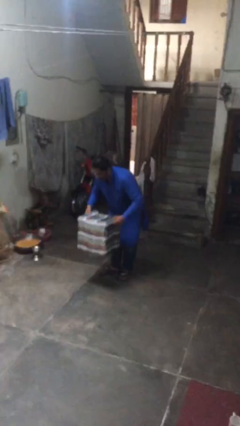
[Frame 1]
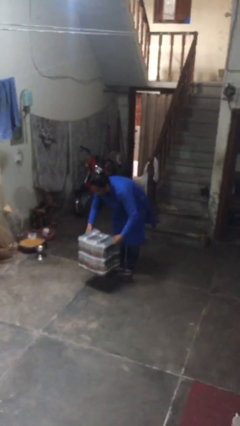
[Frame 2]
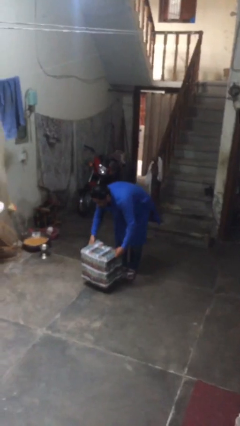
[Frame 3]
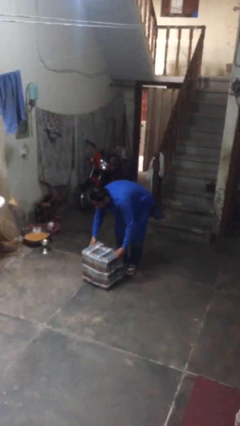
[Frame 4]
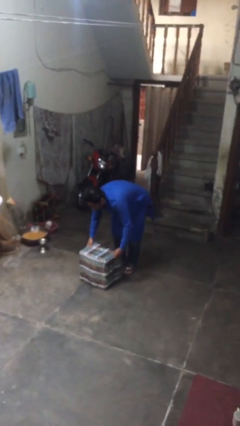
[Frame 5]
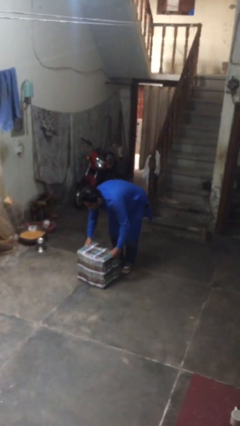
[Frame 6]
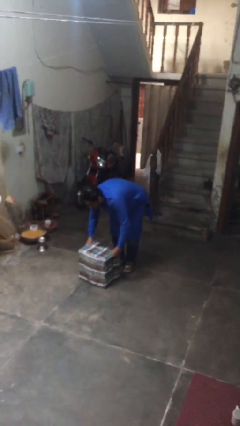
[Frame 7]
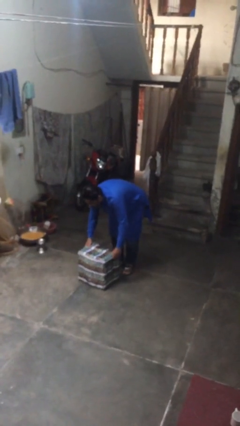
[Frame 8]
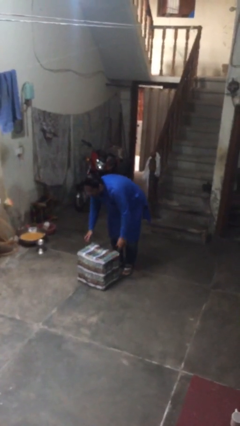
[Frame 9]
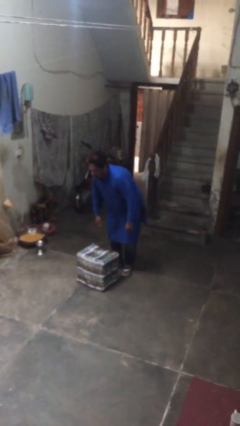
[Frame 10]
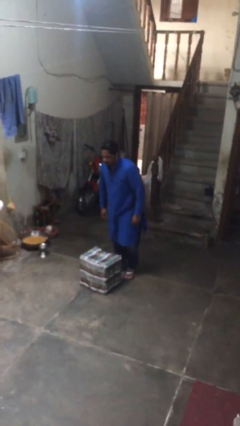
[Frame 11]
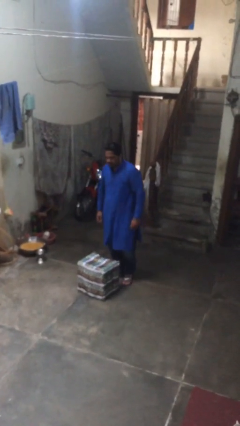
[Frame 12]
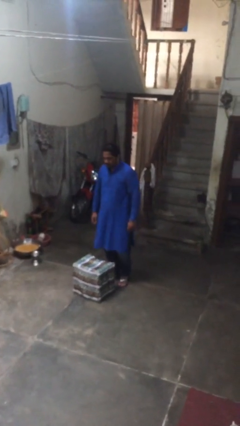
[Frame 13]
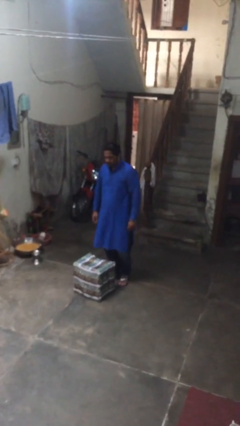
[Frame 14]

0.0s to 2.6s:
person puts down object on floor

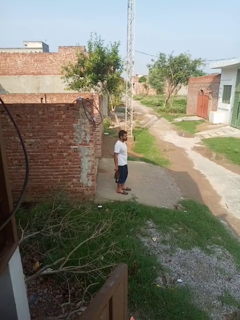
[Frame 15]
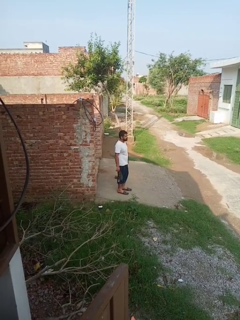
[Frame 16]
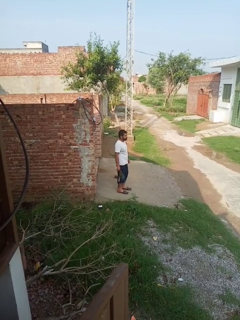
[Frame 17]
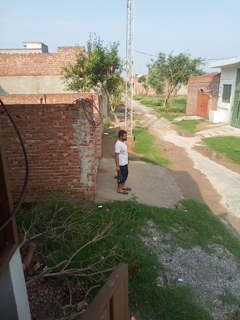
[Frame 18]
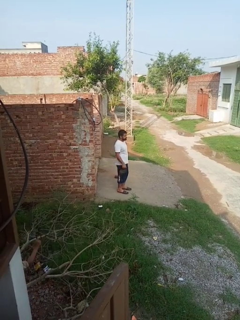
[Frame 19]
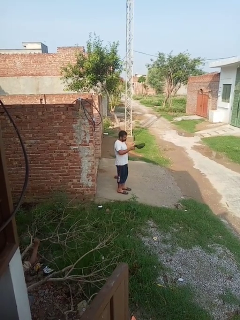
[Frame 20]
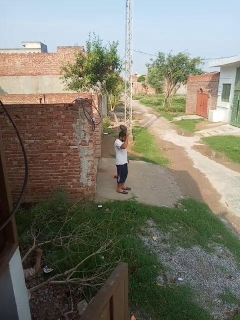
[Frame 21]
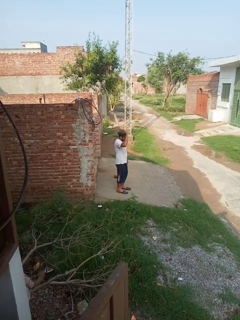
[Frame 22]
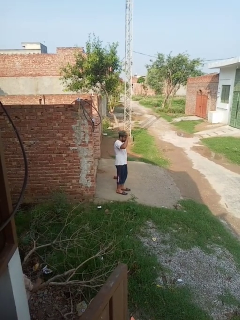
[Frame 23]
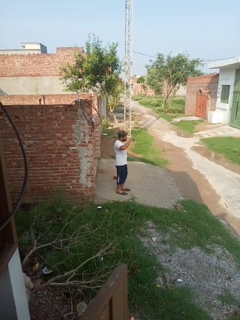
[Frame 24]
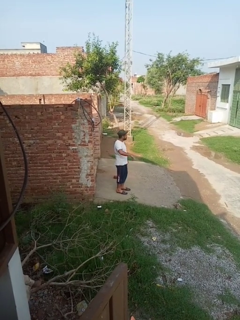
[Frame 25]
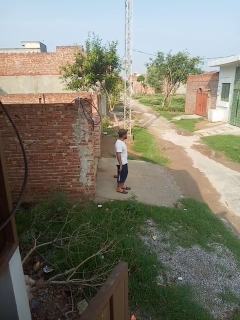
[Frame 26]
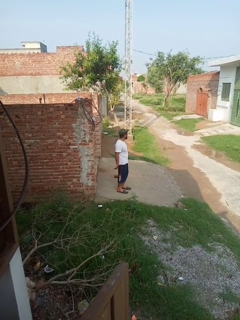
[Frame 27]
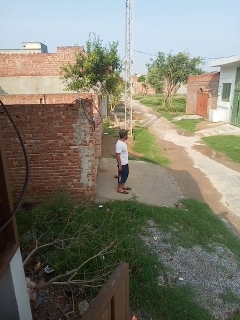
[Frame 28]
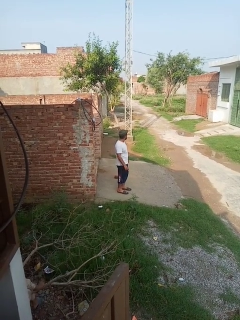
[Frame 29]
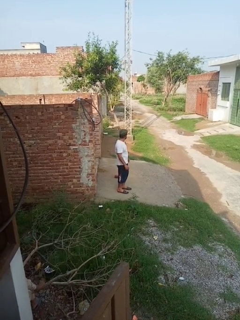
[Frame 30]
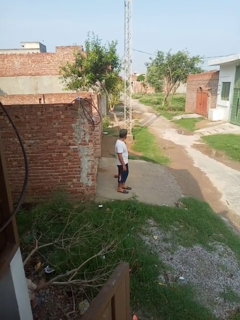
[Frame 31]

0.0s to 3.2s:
person puts on hat

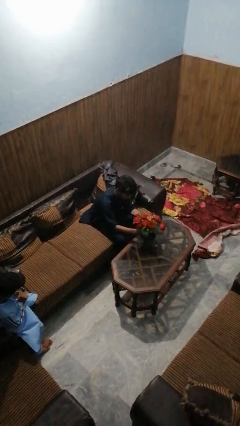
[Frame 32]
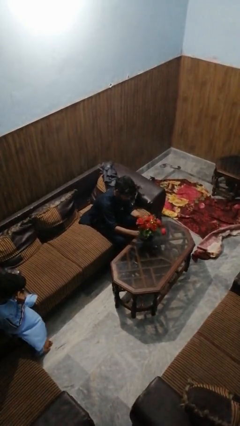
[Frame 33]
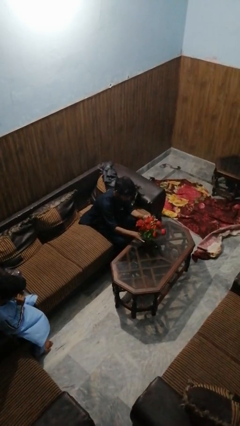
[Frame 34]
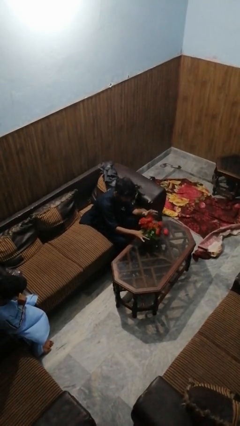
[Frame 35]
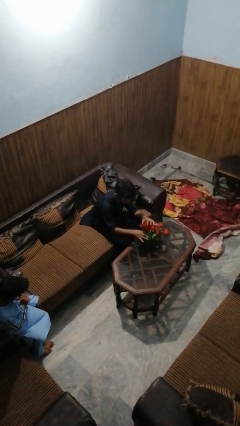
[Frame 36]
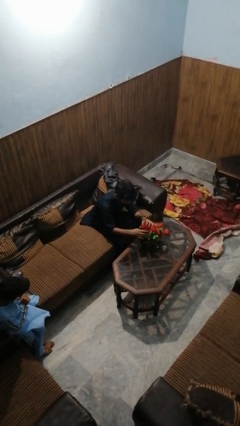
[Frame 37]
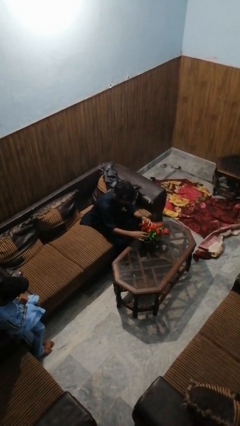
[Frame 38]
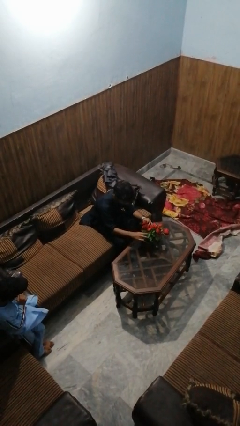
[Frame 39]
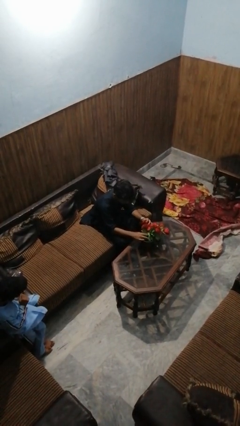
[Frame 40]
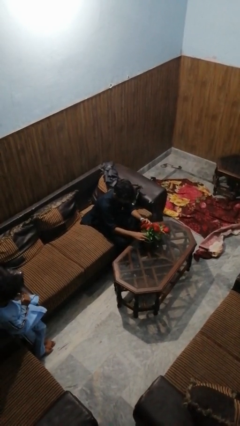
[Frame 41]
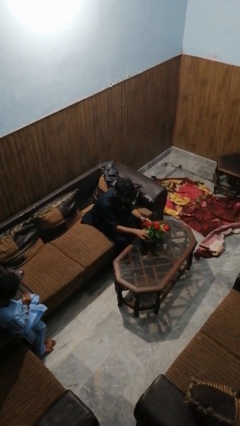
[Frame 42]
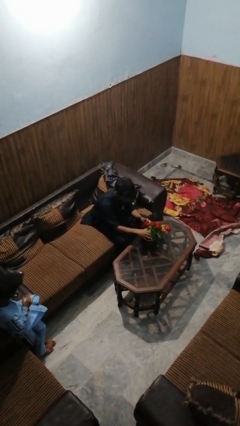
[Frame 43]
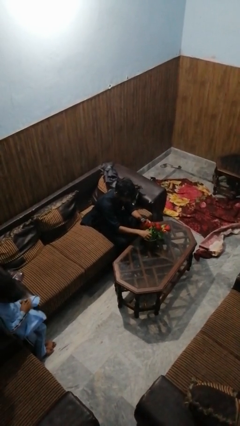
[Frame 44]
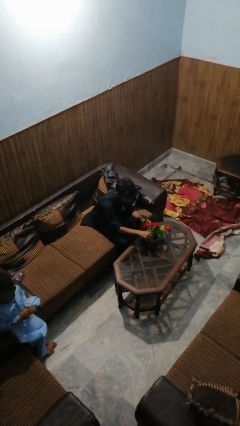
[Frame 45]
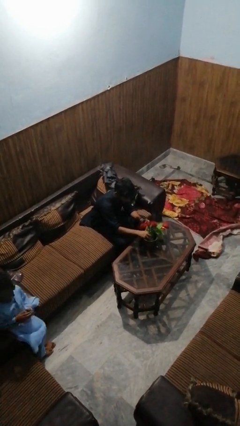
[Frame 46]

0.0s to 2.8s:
person arranges flowers in vase

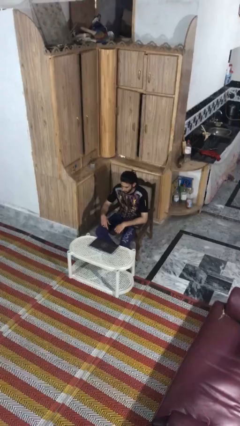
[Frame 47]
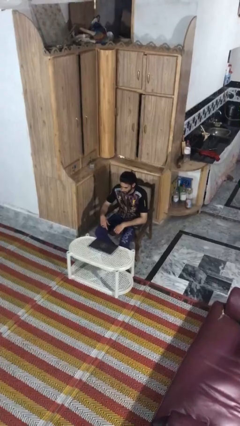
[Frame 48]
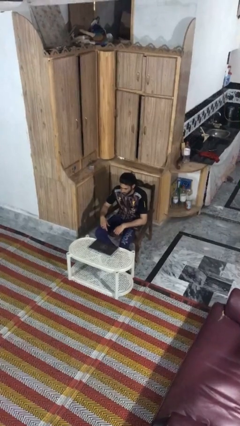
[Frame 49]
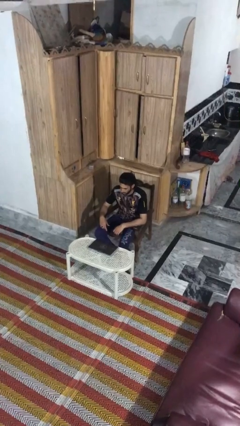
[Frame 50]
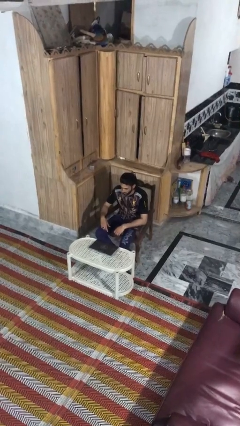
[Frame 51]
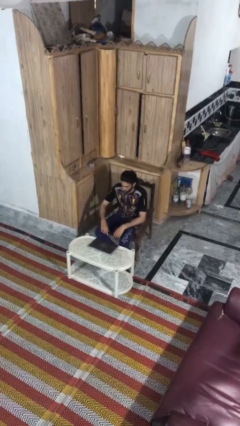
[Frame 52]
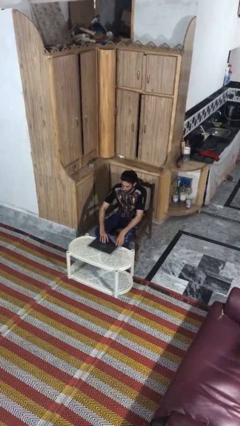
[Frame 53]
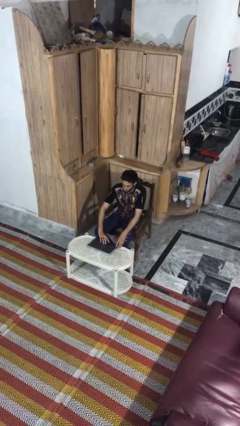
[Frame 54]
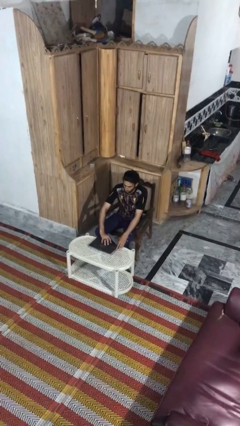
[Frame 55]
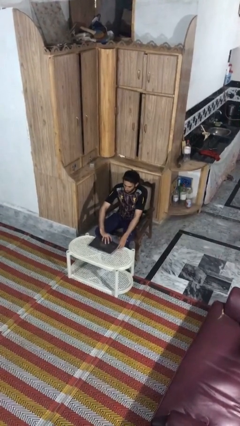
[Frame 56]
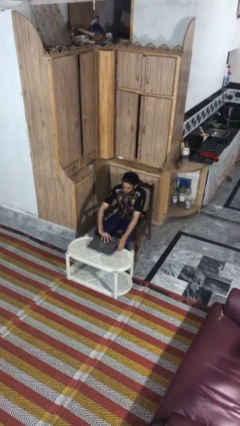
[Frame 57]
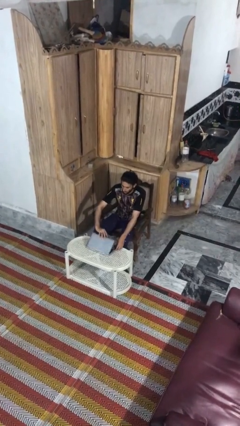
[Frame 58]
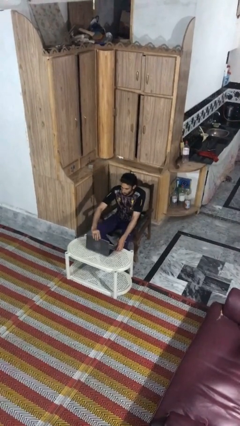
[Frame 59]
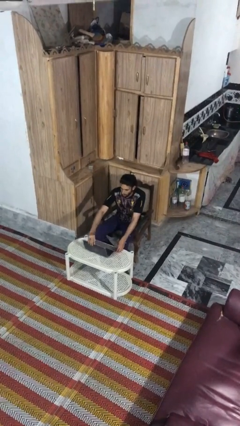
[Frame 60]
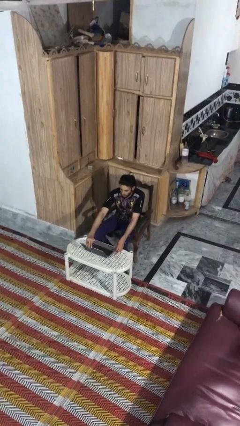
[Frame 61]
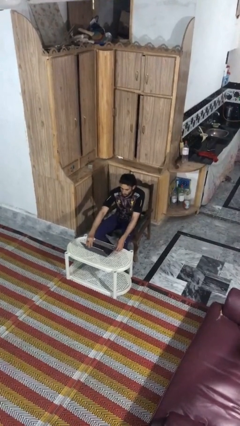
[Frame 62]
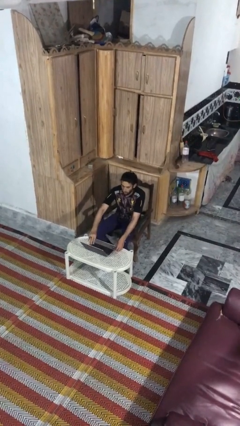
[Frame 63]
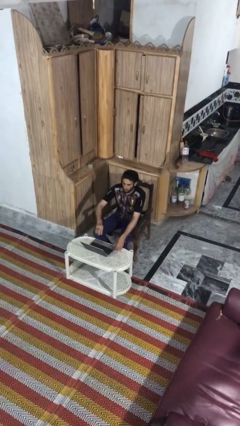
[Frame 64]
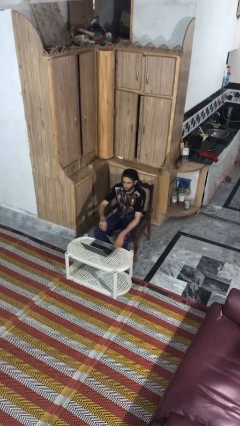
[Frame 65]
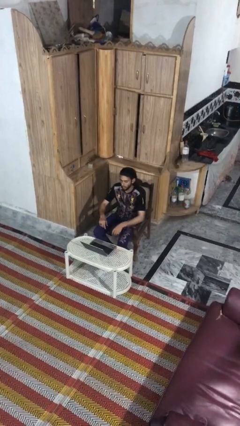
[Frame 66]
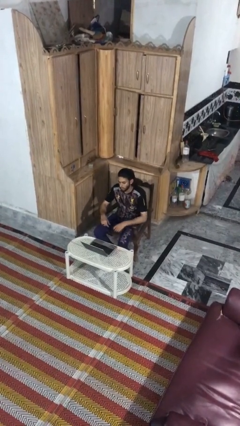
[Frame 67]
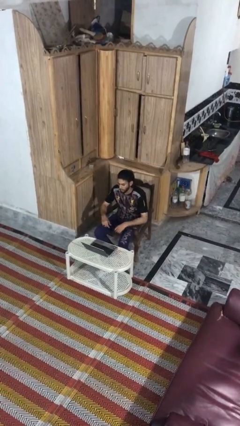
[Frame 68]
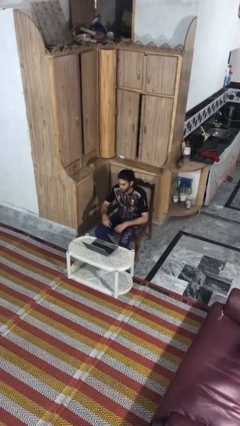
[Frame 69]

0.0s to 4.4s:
person opens laptop

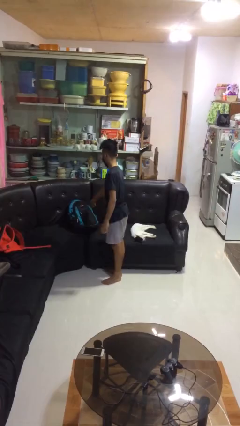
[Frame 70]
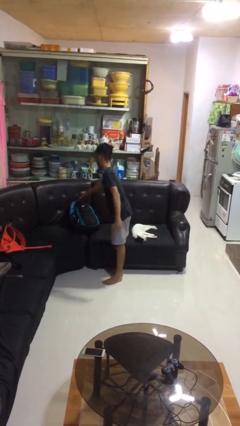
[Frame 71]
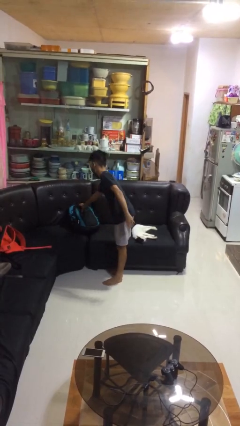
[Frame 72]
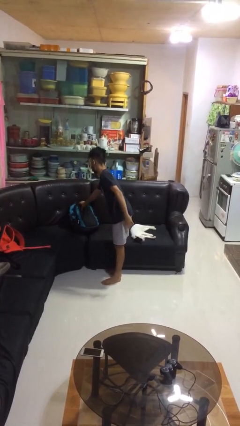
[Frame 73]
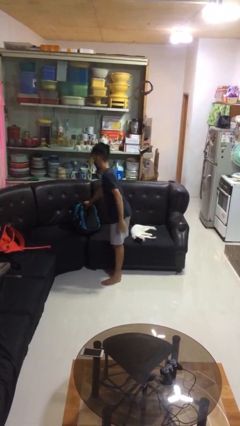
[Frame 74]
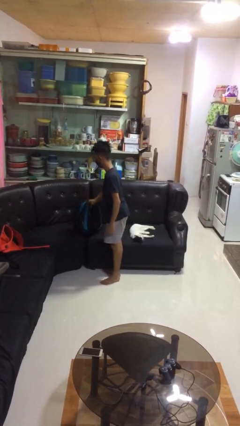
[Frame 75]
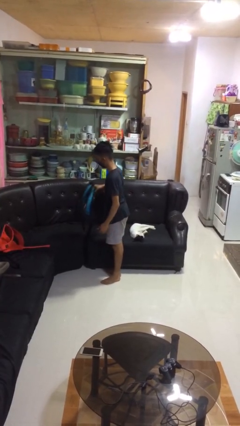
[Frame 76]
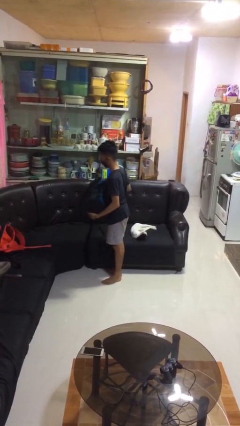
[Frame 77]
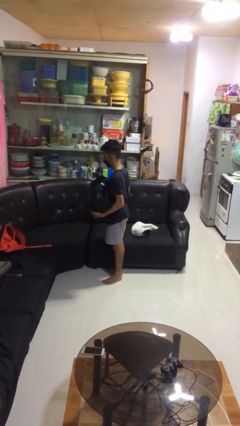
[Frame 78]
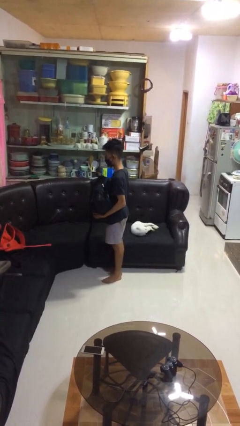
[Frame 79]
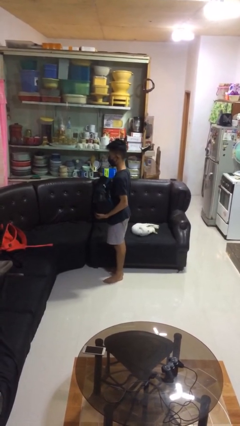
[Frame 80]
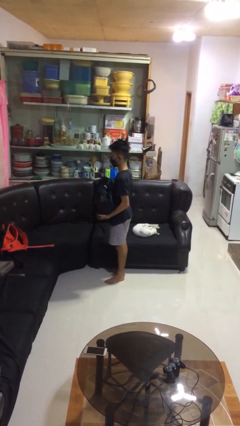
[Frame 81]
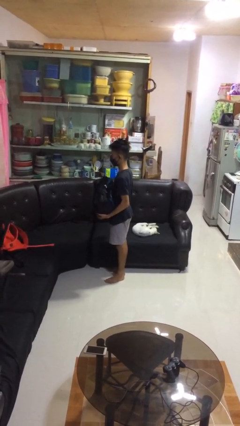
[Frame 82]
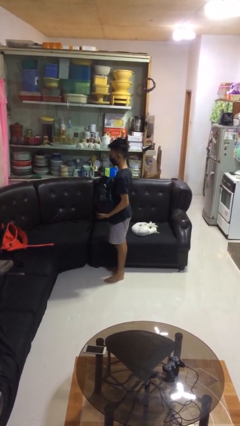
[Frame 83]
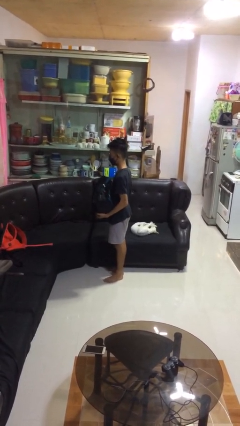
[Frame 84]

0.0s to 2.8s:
person picks up object from couch

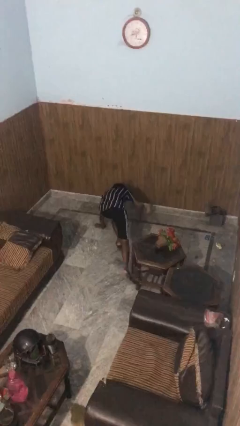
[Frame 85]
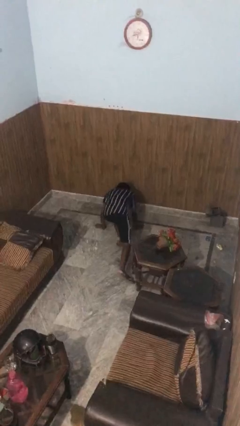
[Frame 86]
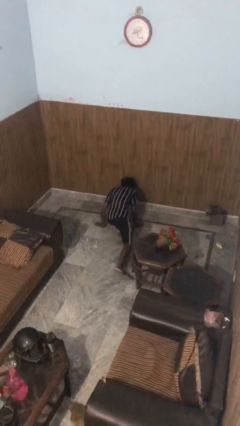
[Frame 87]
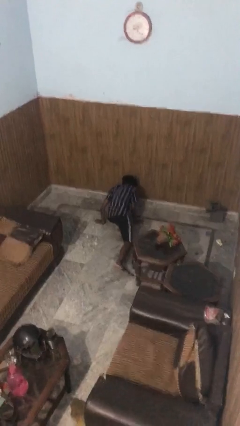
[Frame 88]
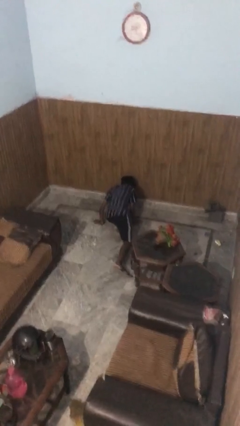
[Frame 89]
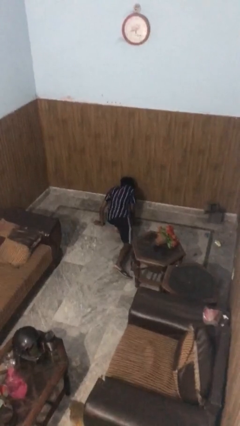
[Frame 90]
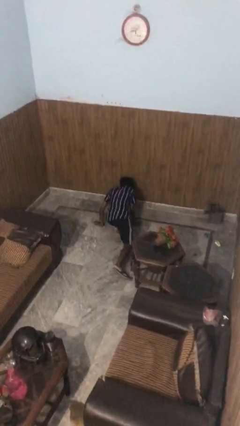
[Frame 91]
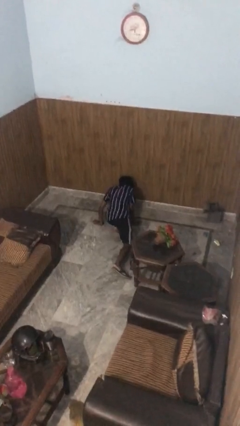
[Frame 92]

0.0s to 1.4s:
person lies down on floor

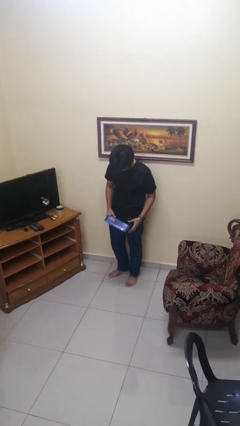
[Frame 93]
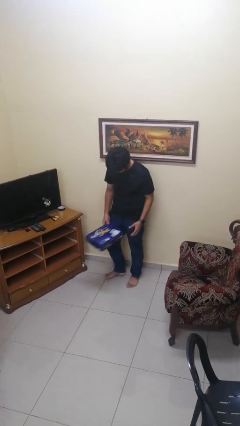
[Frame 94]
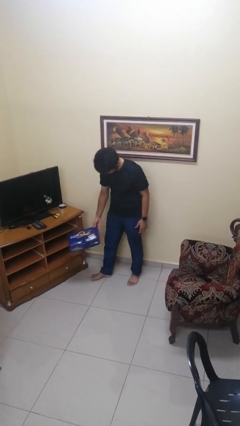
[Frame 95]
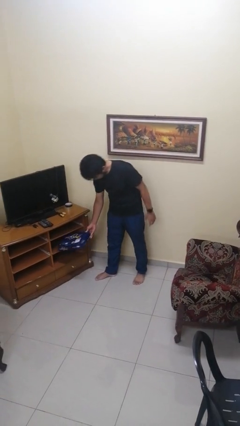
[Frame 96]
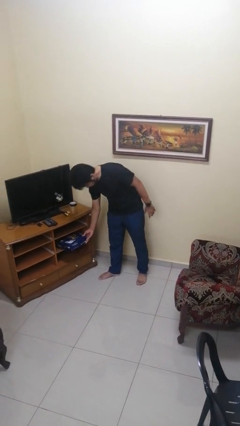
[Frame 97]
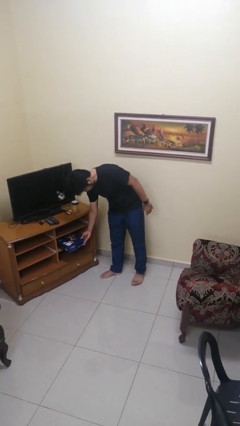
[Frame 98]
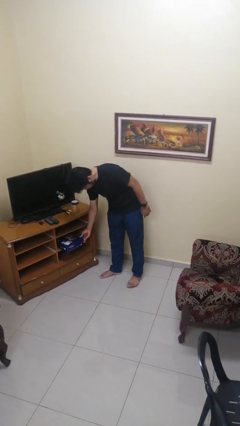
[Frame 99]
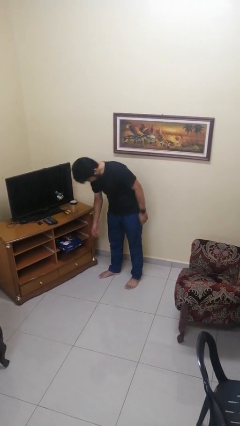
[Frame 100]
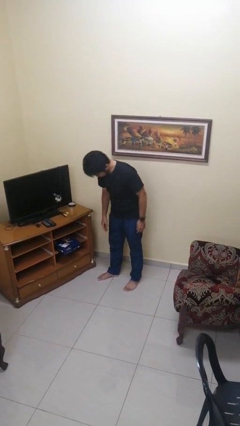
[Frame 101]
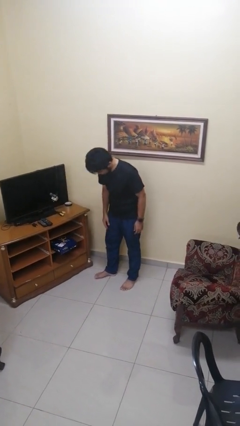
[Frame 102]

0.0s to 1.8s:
person puts down object into cabinet
